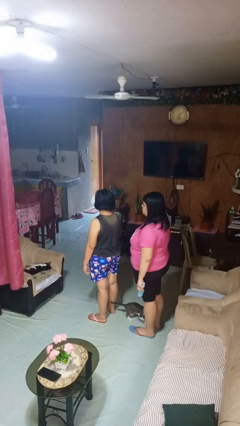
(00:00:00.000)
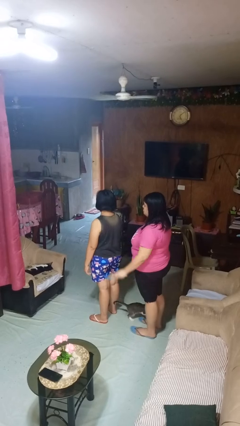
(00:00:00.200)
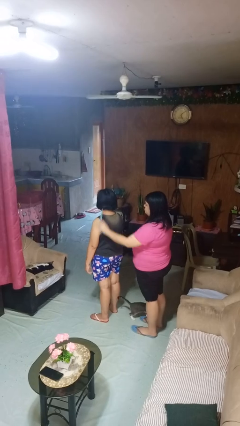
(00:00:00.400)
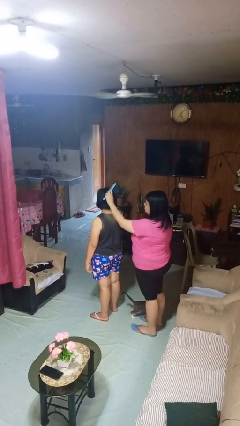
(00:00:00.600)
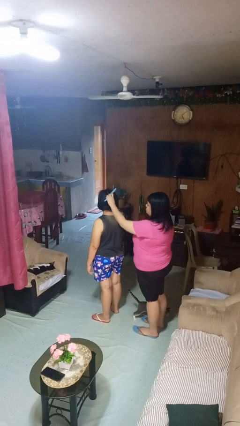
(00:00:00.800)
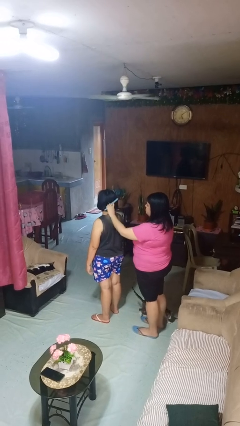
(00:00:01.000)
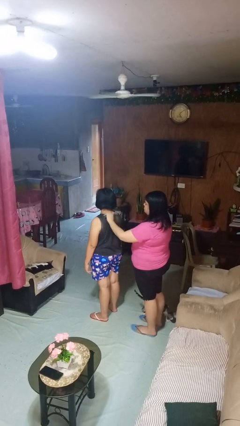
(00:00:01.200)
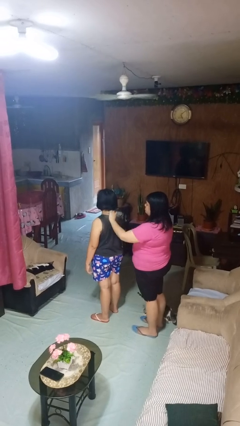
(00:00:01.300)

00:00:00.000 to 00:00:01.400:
person brushes hair of person

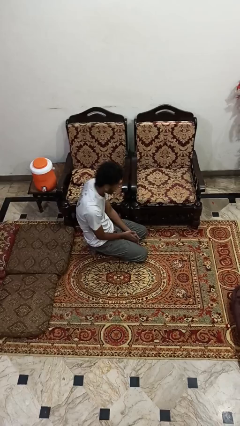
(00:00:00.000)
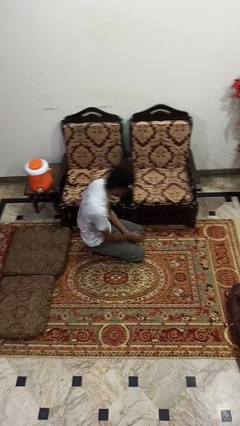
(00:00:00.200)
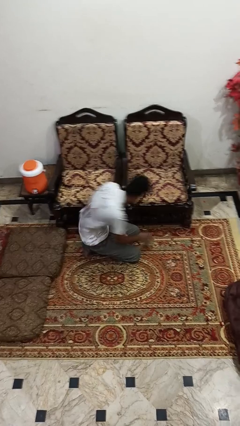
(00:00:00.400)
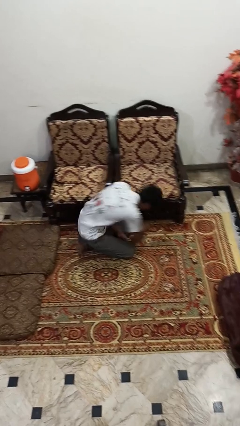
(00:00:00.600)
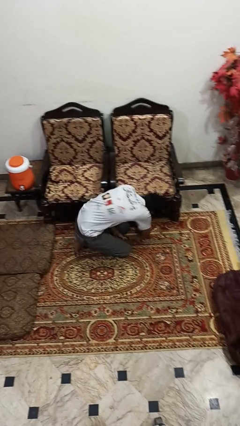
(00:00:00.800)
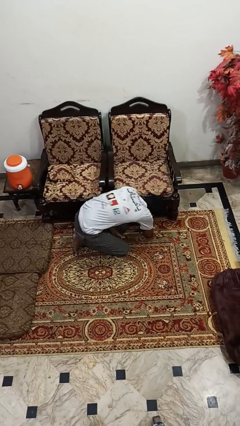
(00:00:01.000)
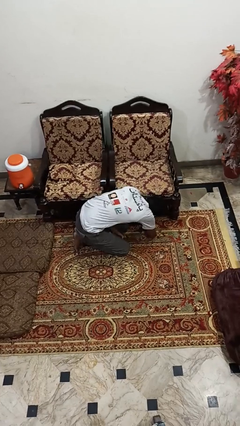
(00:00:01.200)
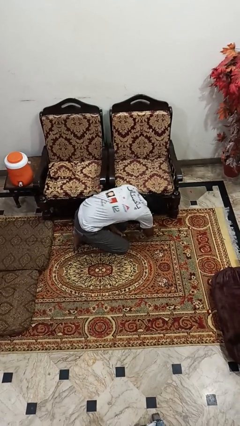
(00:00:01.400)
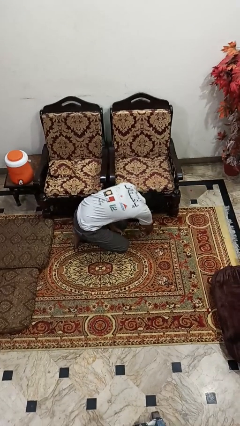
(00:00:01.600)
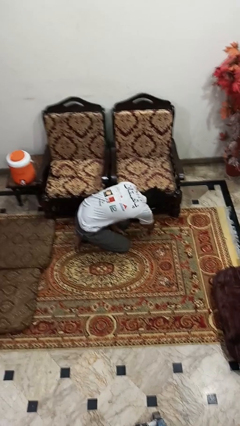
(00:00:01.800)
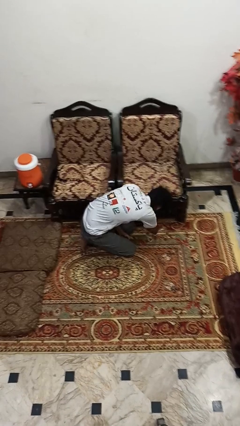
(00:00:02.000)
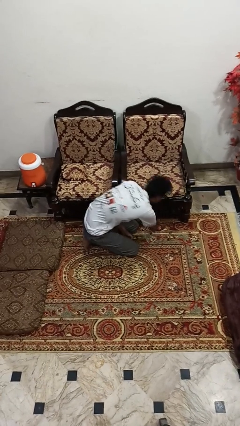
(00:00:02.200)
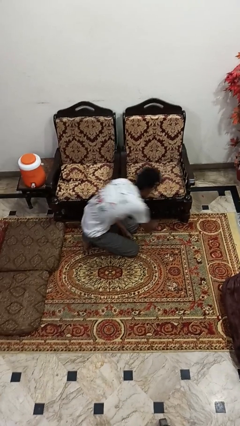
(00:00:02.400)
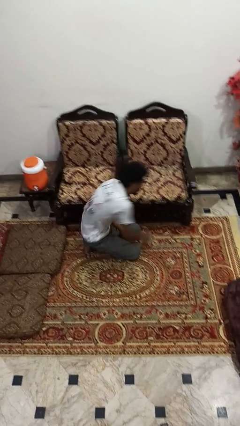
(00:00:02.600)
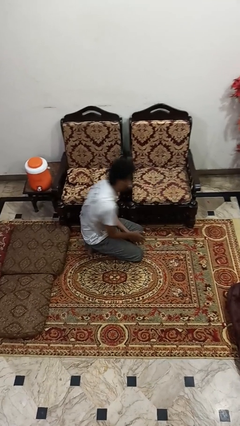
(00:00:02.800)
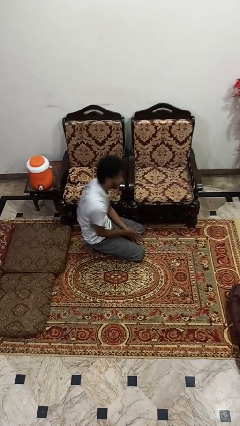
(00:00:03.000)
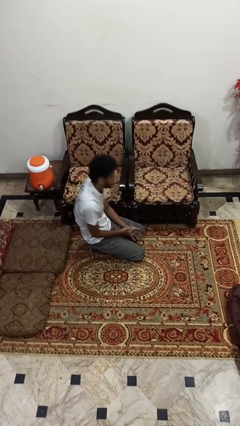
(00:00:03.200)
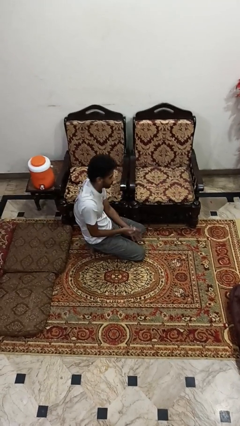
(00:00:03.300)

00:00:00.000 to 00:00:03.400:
person searches under couch

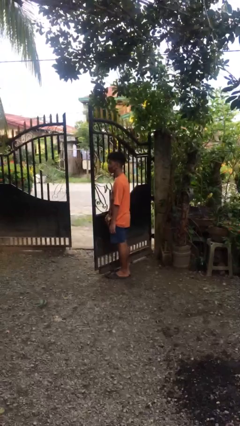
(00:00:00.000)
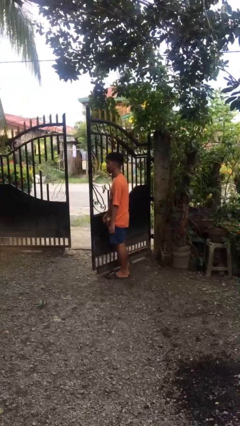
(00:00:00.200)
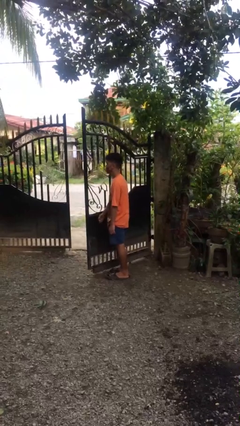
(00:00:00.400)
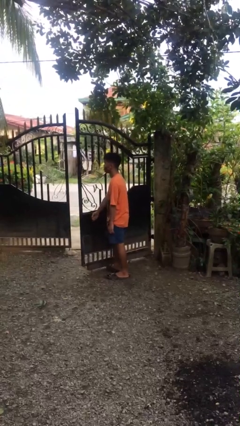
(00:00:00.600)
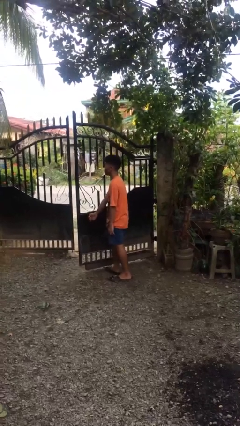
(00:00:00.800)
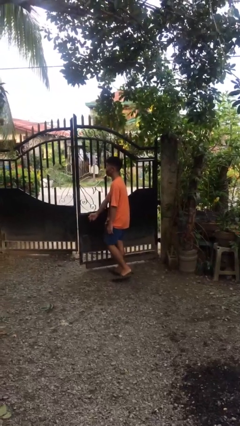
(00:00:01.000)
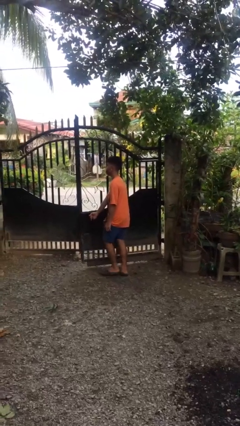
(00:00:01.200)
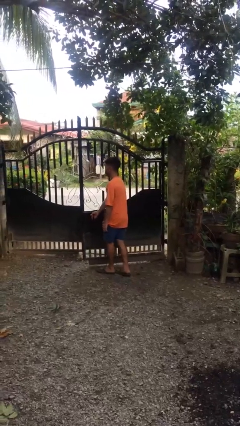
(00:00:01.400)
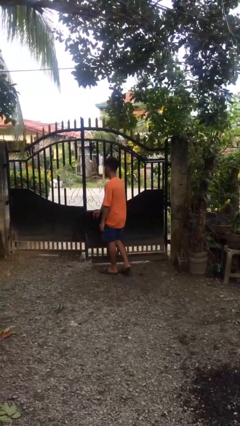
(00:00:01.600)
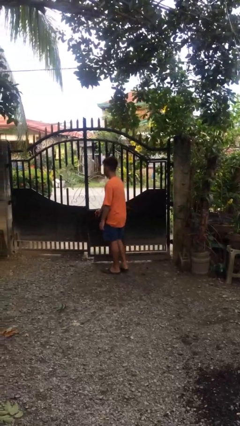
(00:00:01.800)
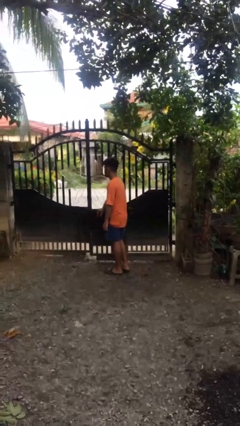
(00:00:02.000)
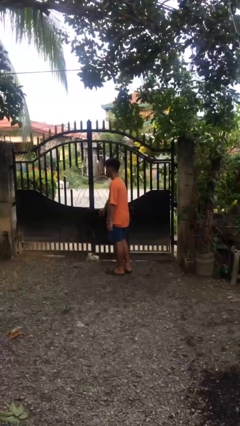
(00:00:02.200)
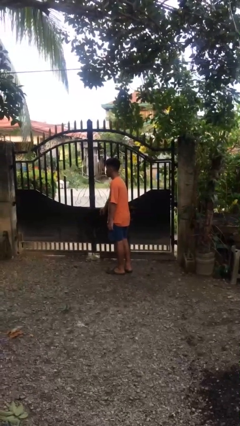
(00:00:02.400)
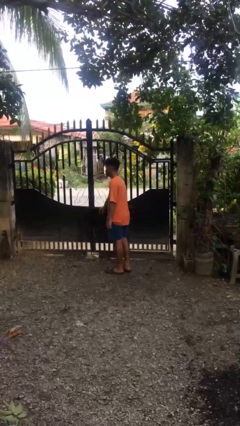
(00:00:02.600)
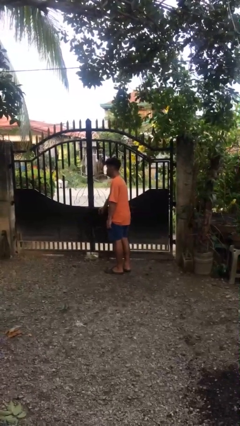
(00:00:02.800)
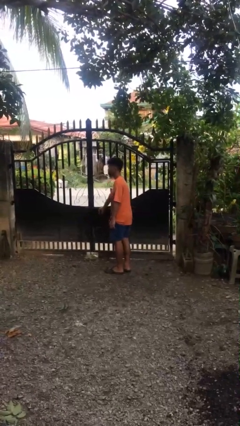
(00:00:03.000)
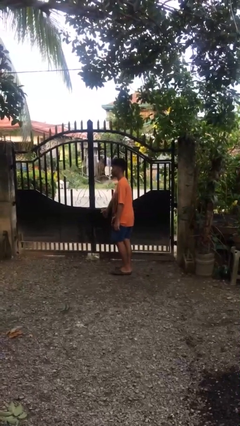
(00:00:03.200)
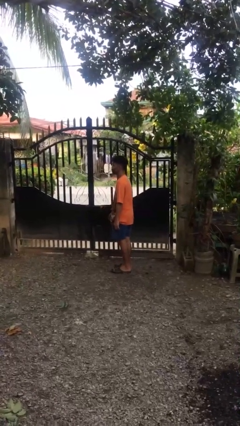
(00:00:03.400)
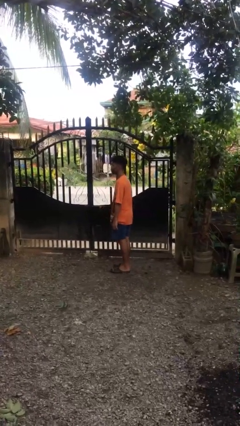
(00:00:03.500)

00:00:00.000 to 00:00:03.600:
person closes gate

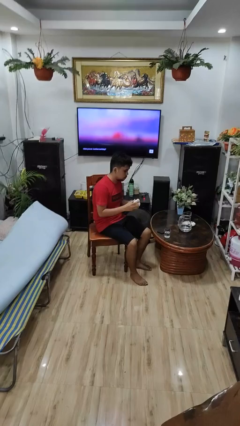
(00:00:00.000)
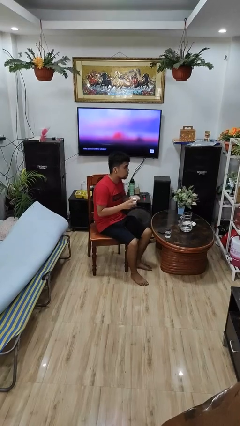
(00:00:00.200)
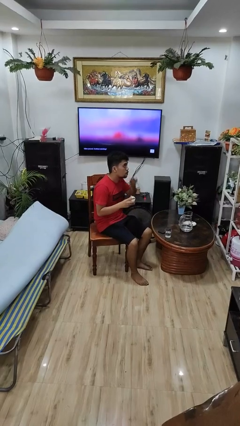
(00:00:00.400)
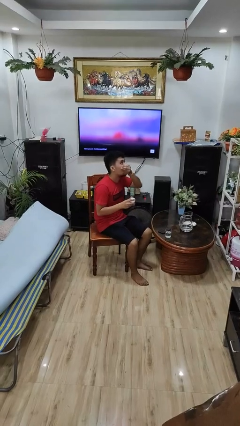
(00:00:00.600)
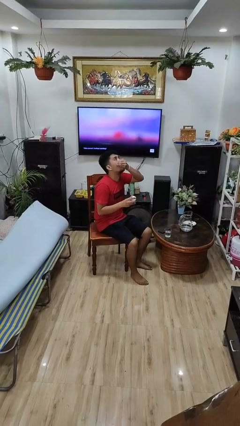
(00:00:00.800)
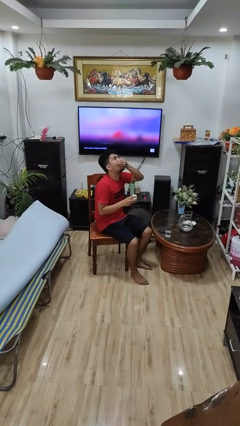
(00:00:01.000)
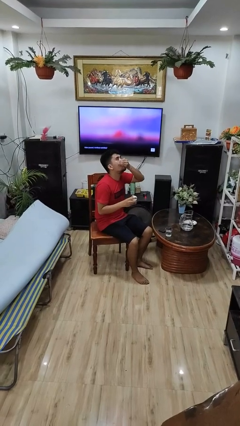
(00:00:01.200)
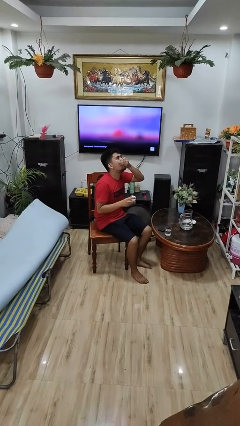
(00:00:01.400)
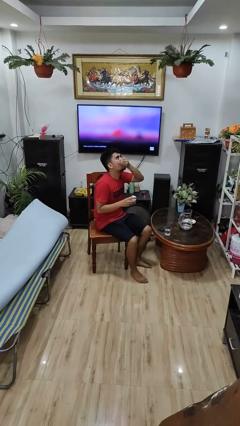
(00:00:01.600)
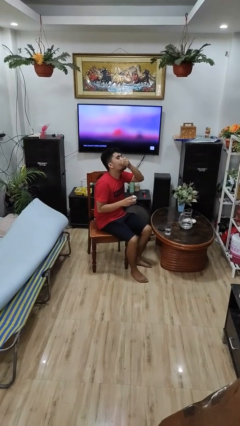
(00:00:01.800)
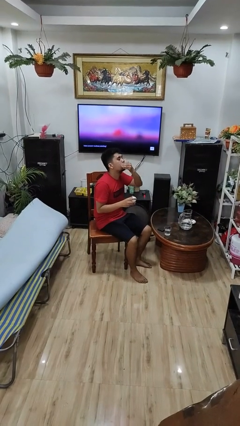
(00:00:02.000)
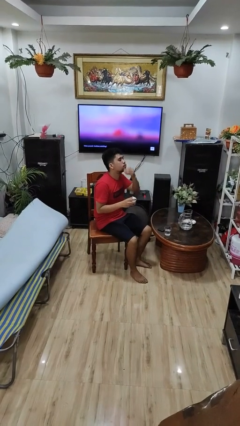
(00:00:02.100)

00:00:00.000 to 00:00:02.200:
person takes medicine pills

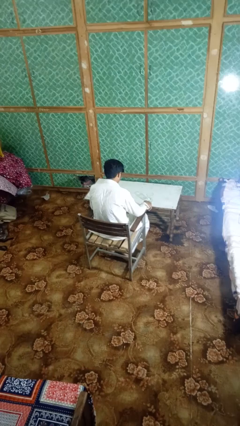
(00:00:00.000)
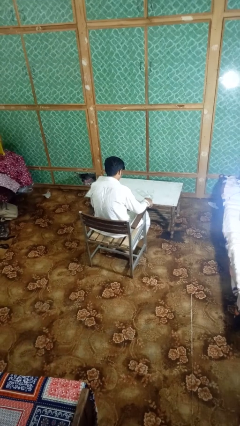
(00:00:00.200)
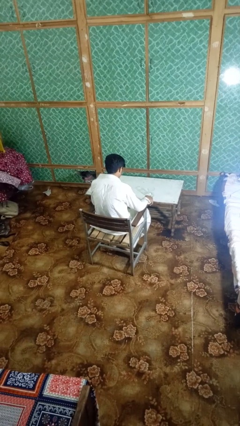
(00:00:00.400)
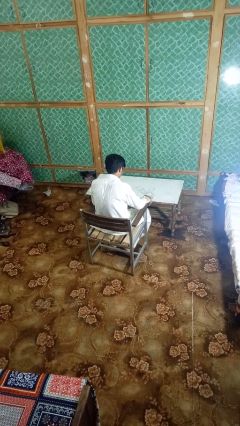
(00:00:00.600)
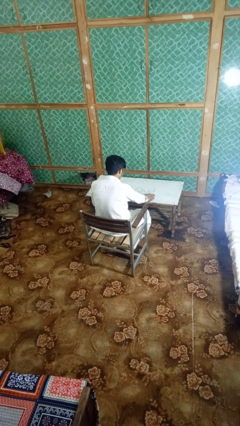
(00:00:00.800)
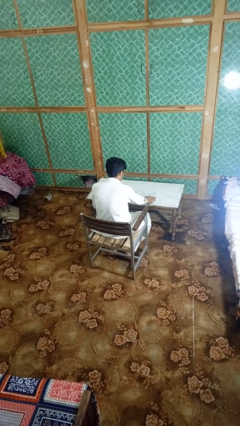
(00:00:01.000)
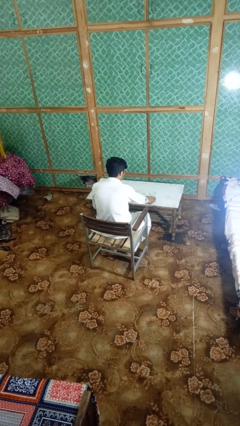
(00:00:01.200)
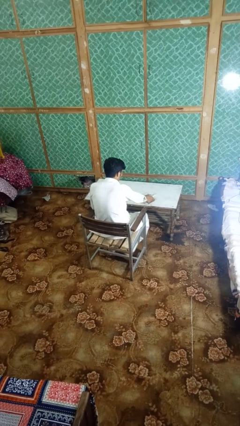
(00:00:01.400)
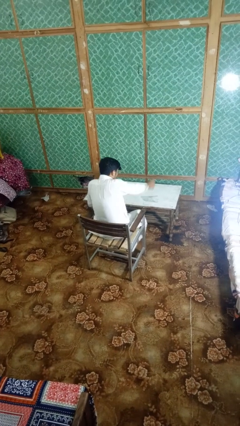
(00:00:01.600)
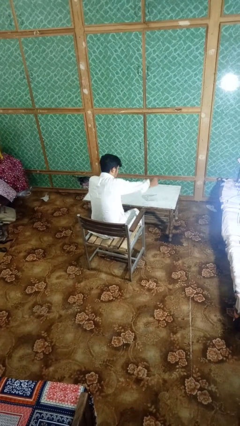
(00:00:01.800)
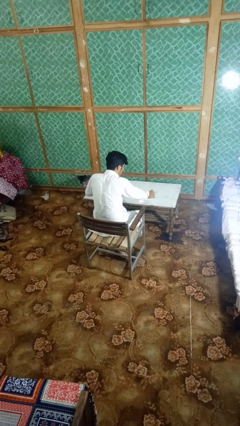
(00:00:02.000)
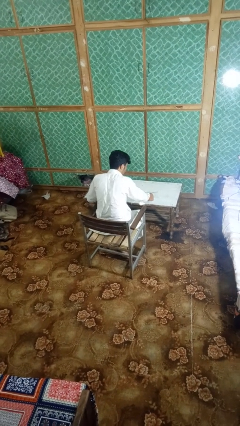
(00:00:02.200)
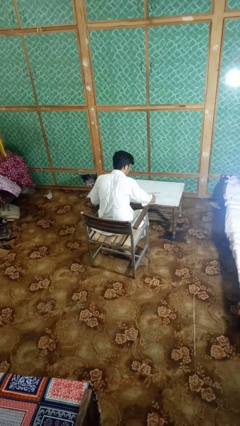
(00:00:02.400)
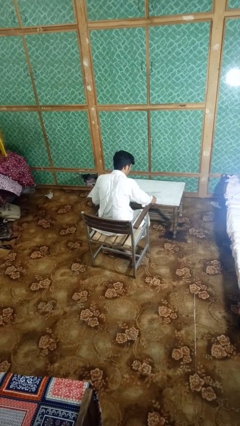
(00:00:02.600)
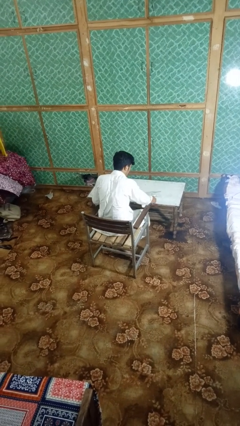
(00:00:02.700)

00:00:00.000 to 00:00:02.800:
person spills on table

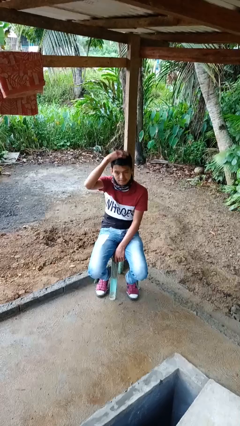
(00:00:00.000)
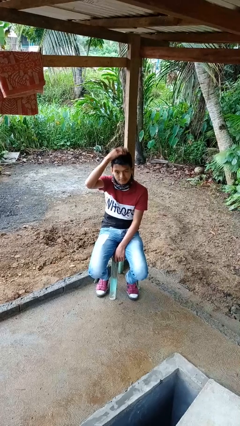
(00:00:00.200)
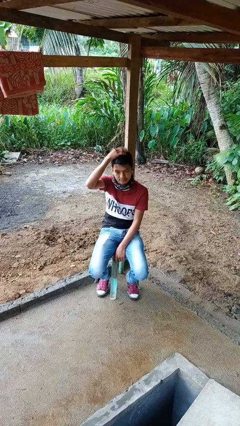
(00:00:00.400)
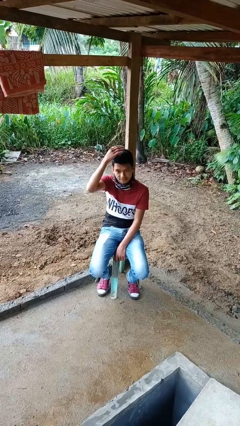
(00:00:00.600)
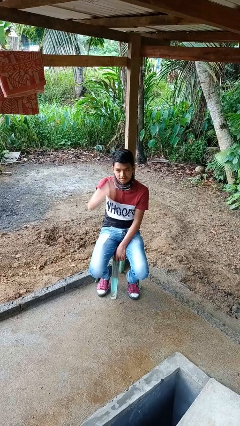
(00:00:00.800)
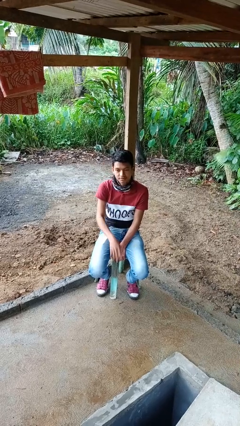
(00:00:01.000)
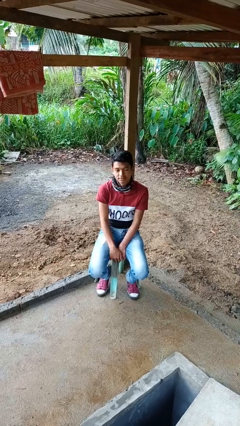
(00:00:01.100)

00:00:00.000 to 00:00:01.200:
person pats head

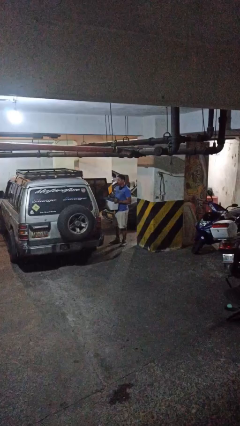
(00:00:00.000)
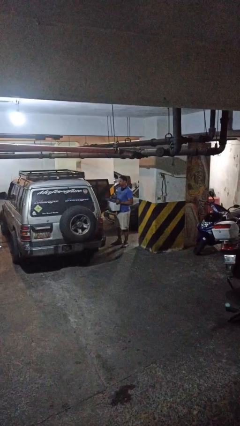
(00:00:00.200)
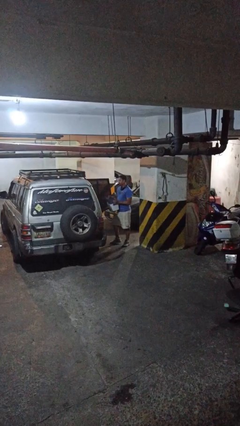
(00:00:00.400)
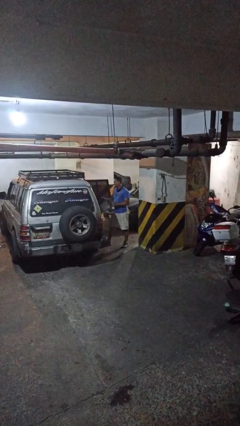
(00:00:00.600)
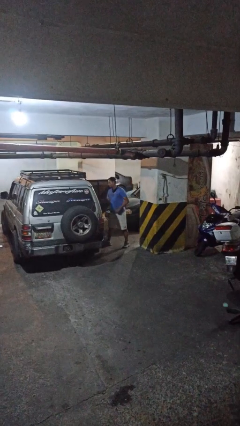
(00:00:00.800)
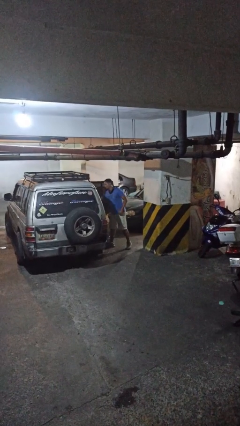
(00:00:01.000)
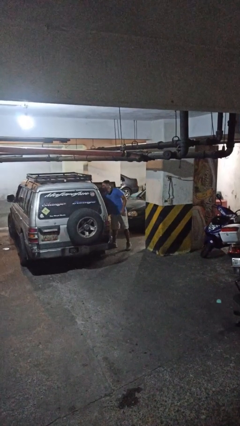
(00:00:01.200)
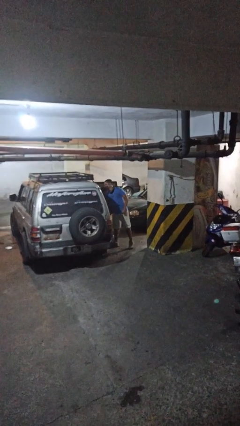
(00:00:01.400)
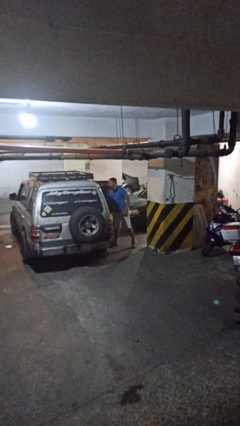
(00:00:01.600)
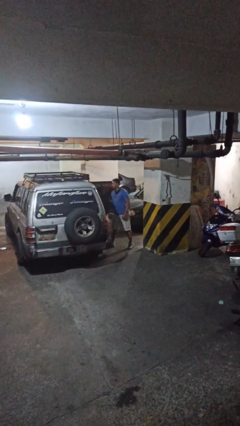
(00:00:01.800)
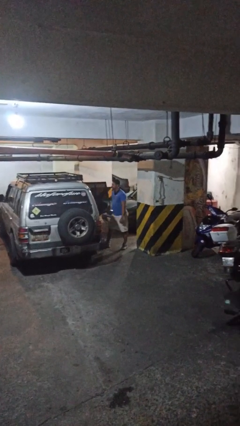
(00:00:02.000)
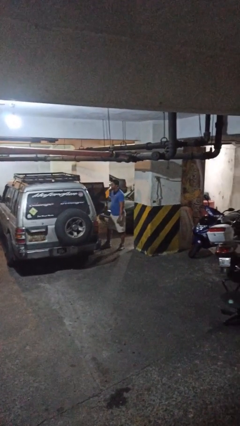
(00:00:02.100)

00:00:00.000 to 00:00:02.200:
person loads car

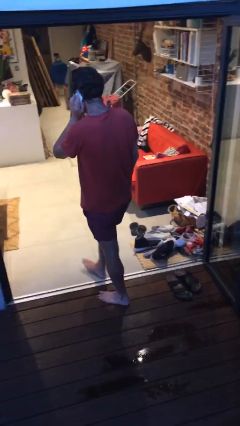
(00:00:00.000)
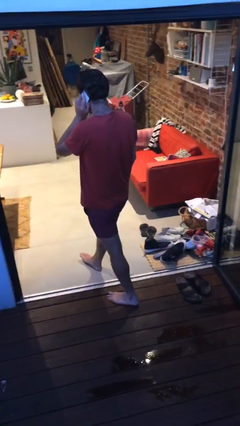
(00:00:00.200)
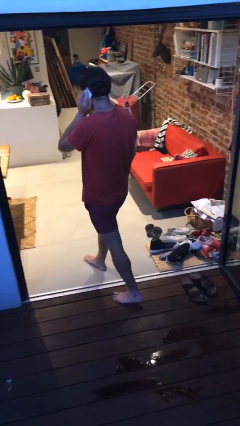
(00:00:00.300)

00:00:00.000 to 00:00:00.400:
person exits scene through structure
